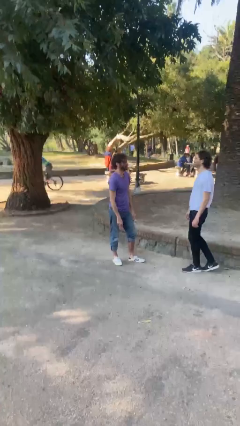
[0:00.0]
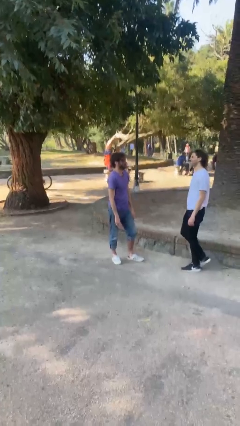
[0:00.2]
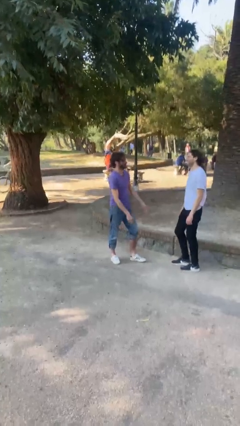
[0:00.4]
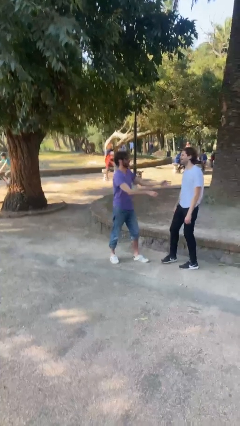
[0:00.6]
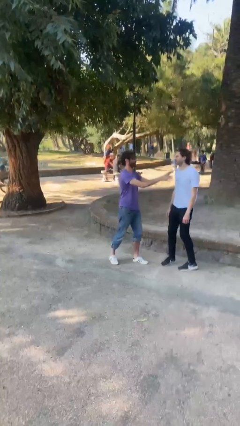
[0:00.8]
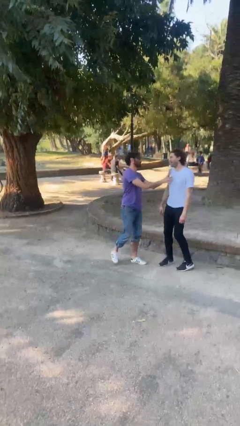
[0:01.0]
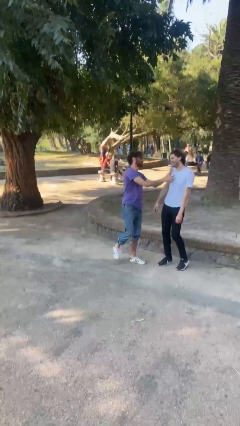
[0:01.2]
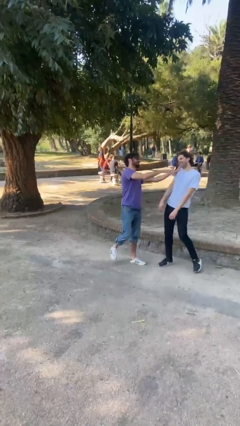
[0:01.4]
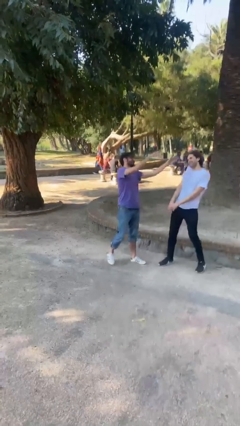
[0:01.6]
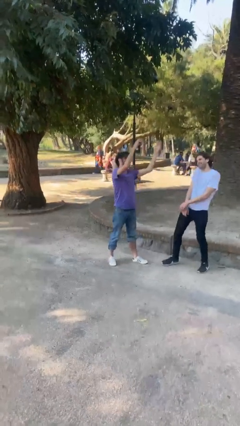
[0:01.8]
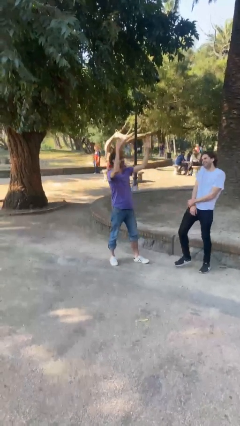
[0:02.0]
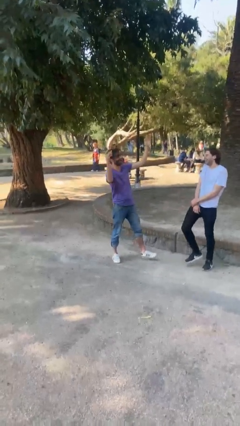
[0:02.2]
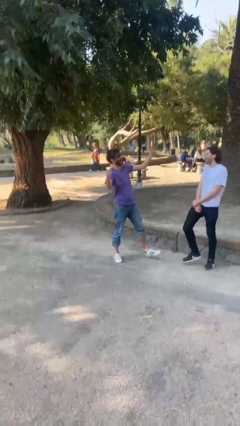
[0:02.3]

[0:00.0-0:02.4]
person shoves person

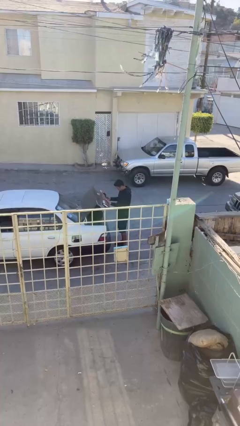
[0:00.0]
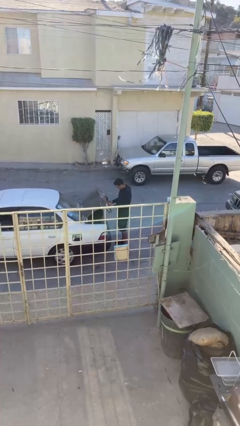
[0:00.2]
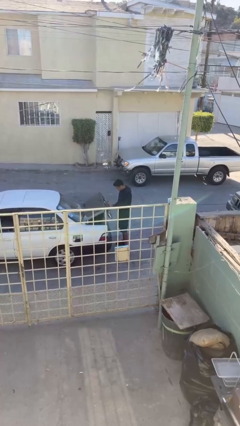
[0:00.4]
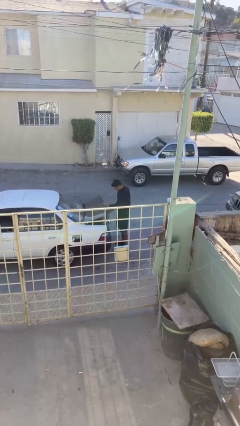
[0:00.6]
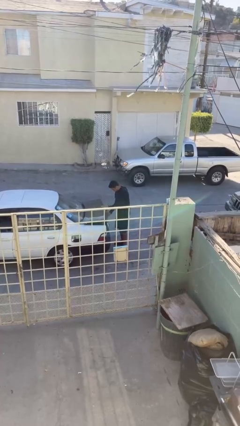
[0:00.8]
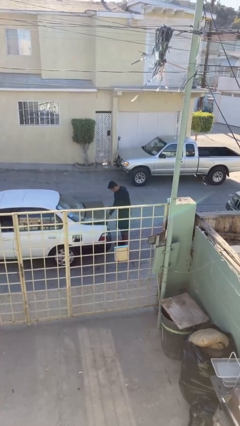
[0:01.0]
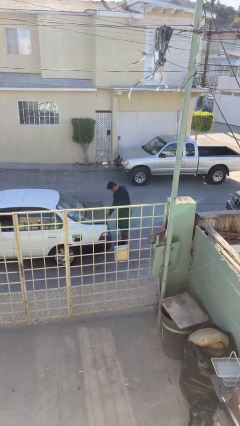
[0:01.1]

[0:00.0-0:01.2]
person closes car trunk

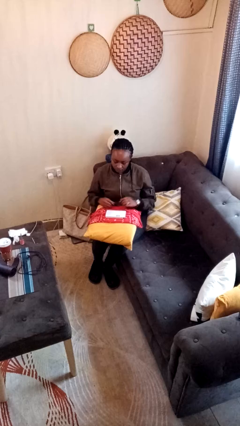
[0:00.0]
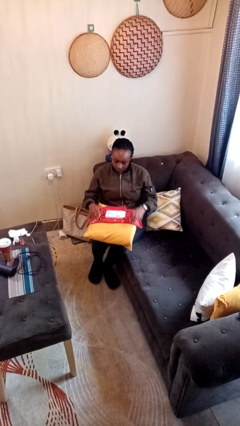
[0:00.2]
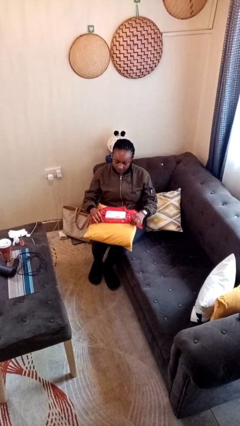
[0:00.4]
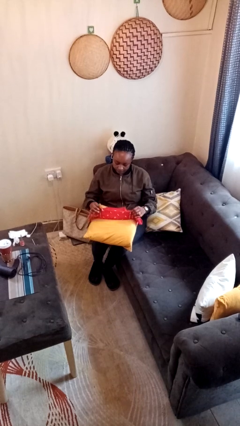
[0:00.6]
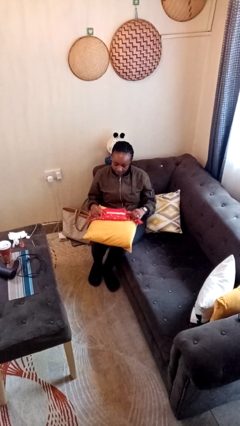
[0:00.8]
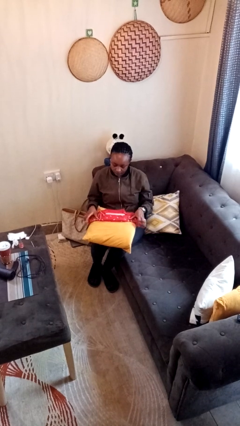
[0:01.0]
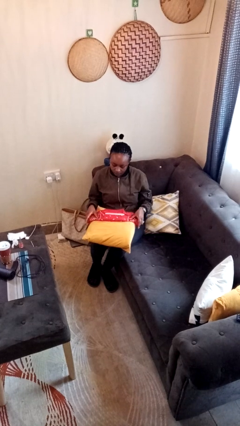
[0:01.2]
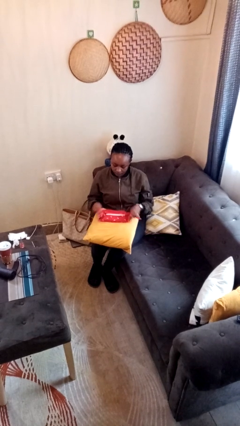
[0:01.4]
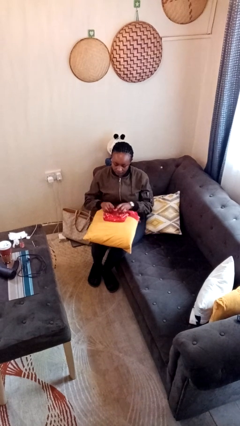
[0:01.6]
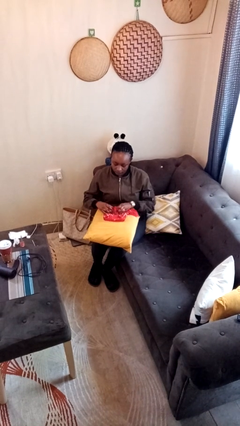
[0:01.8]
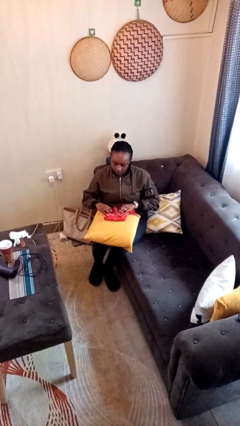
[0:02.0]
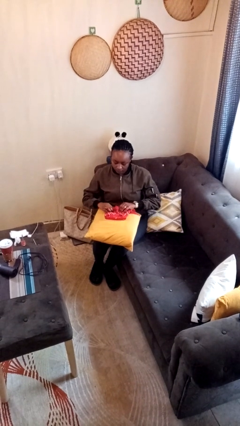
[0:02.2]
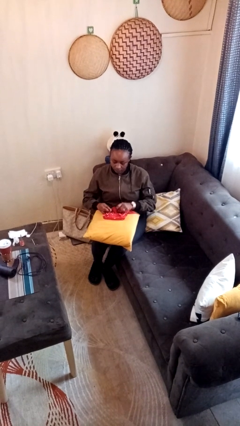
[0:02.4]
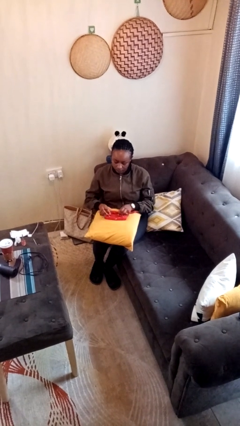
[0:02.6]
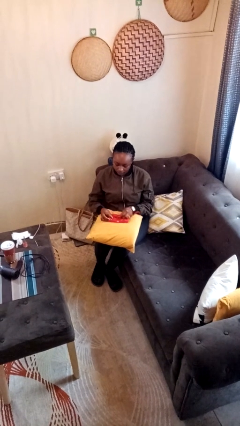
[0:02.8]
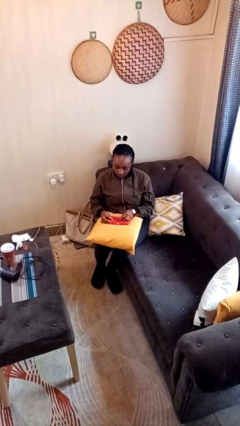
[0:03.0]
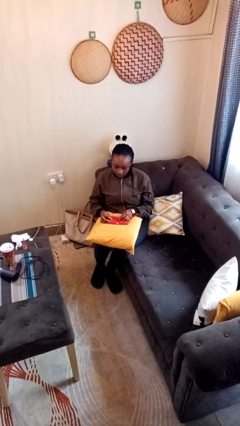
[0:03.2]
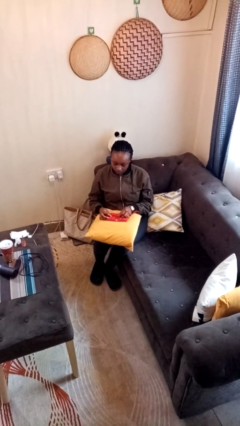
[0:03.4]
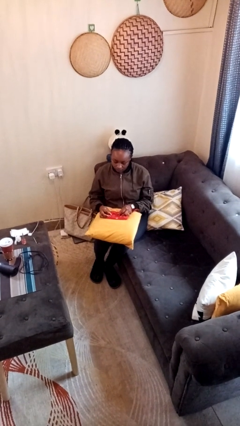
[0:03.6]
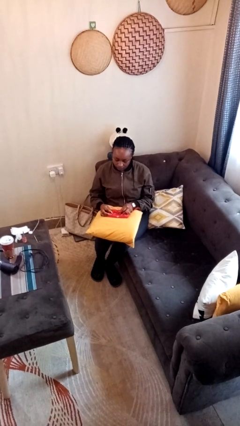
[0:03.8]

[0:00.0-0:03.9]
person wraps box

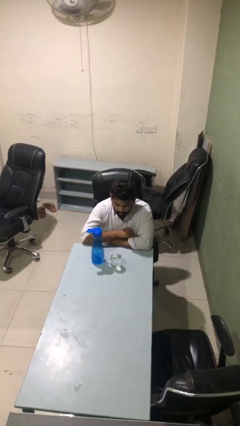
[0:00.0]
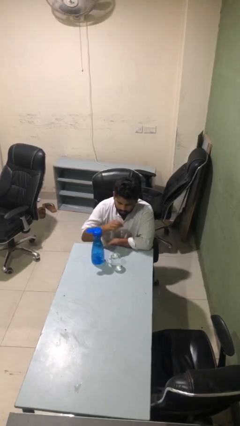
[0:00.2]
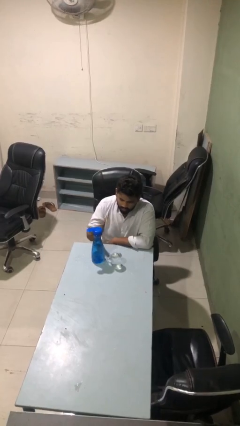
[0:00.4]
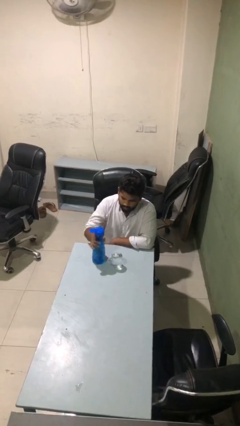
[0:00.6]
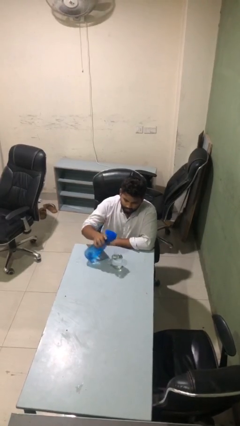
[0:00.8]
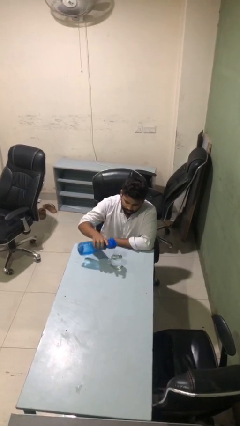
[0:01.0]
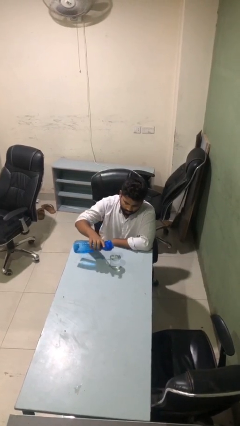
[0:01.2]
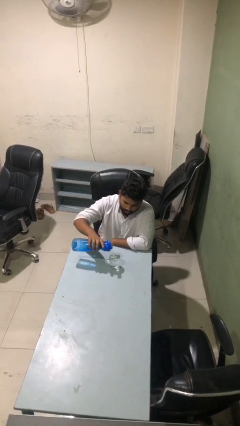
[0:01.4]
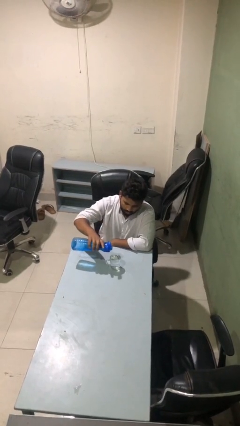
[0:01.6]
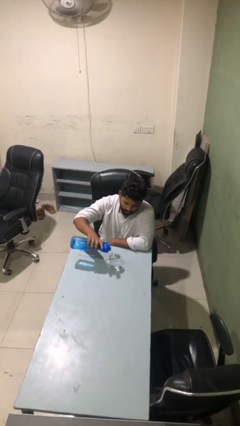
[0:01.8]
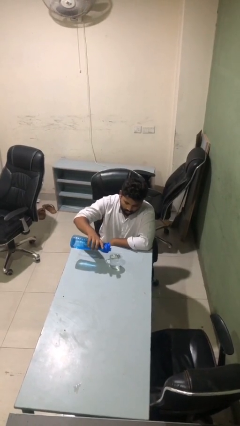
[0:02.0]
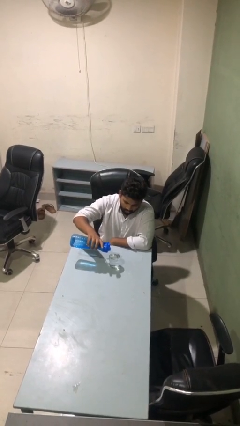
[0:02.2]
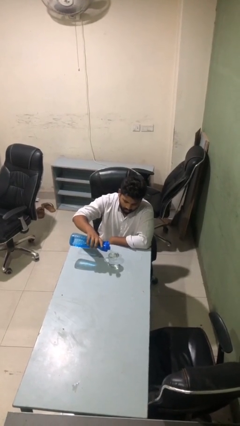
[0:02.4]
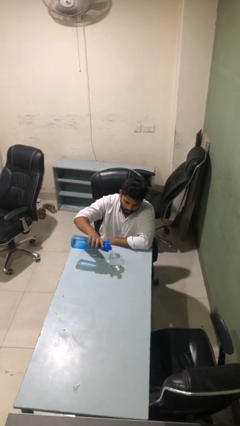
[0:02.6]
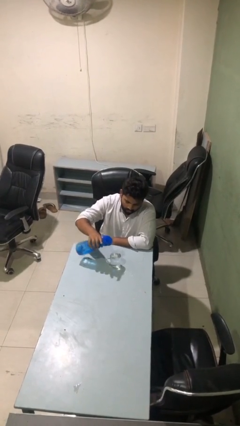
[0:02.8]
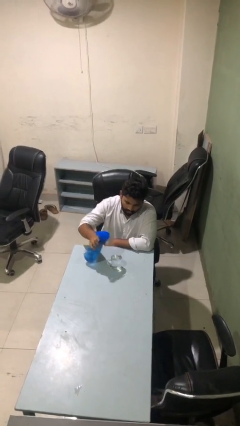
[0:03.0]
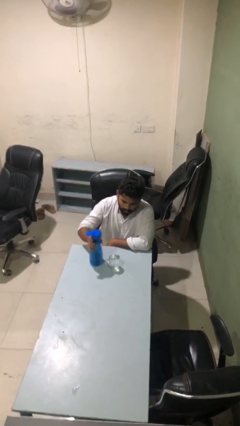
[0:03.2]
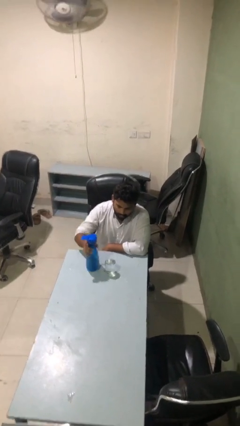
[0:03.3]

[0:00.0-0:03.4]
person pours liquid into cup

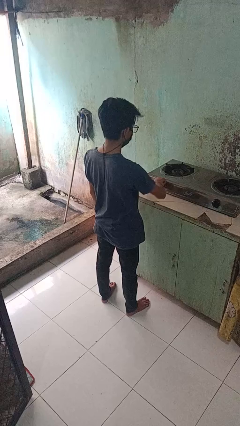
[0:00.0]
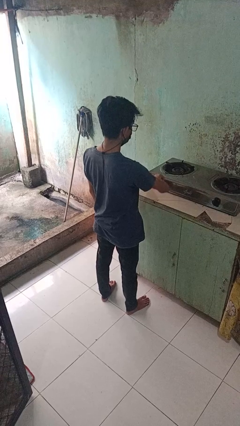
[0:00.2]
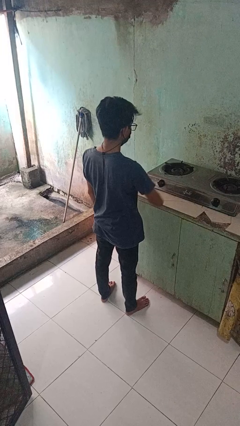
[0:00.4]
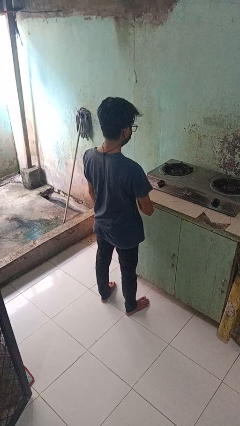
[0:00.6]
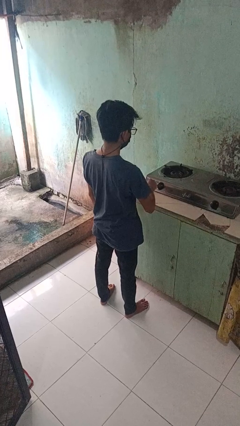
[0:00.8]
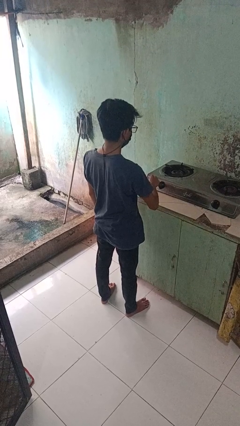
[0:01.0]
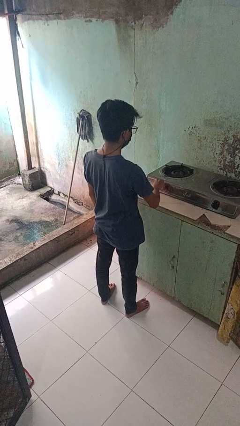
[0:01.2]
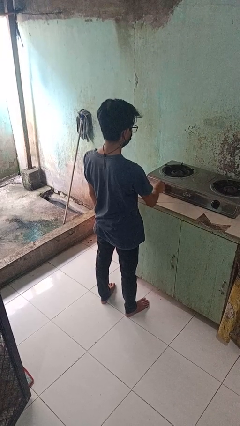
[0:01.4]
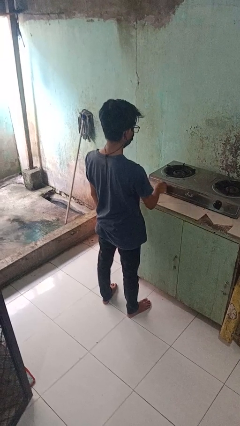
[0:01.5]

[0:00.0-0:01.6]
person turns on stovetop

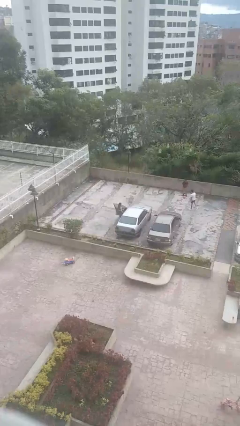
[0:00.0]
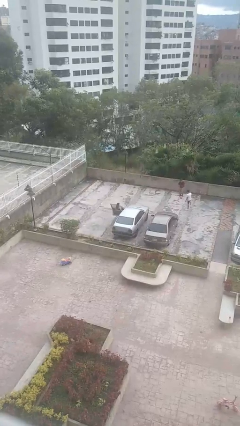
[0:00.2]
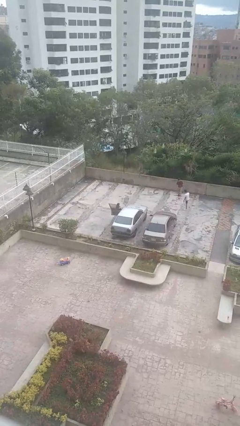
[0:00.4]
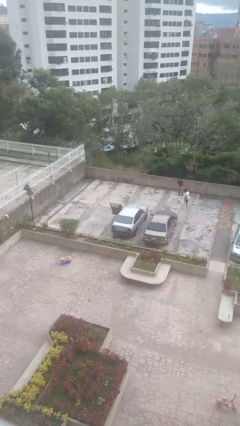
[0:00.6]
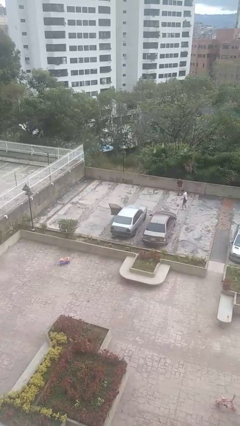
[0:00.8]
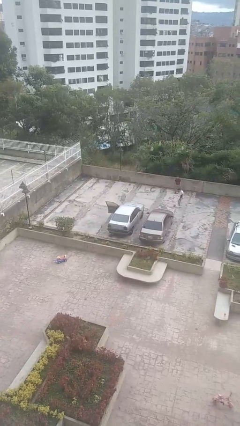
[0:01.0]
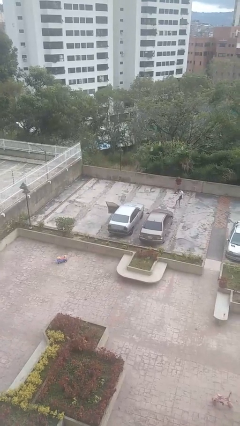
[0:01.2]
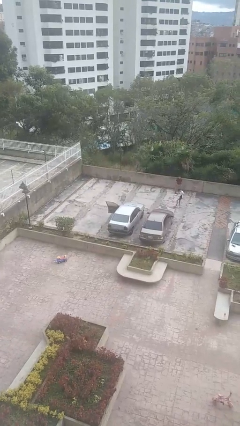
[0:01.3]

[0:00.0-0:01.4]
person enters car

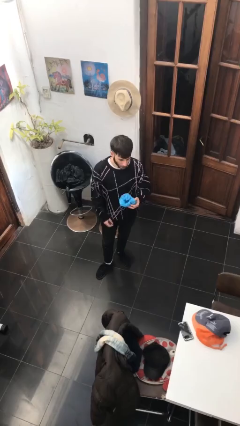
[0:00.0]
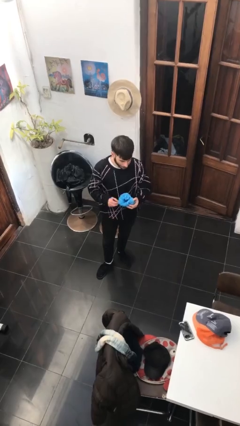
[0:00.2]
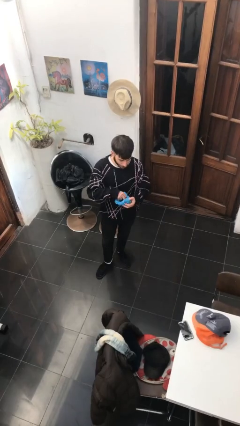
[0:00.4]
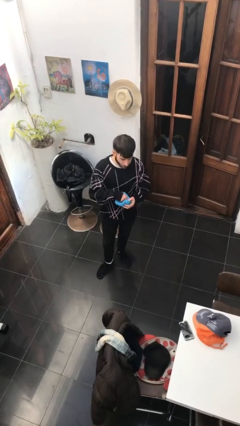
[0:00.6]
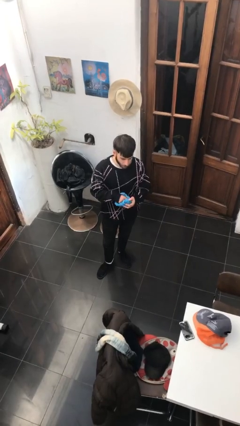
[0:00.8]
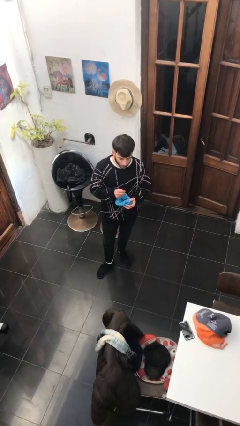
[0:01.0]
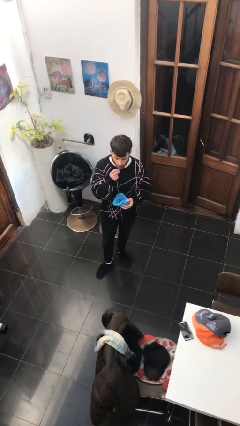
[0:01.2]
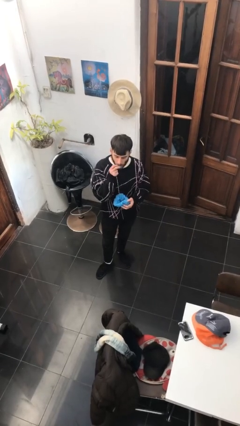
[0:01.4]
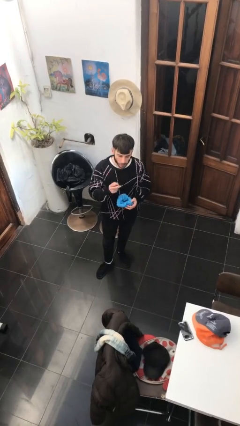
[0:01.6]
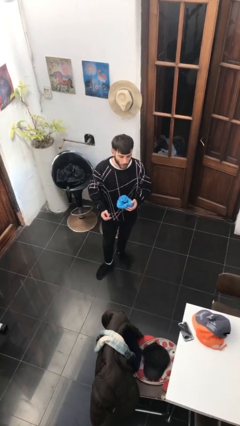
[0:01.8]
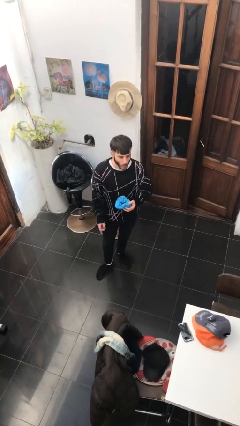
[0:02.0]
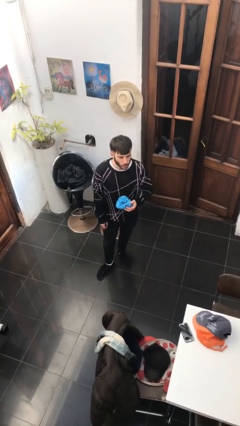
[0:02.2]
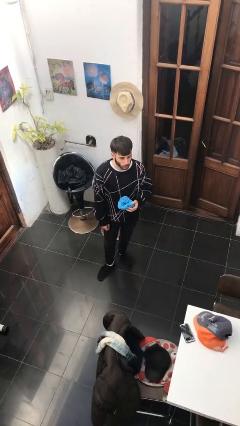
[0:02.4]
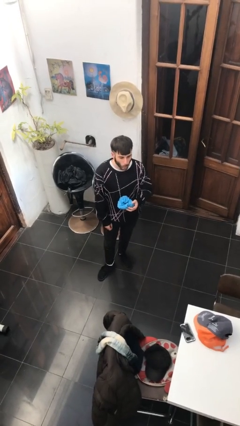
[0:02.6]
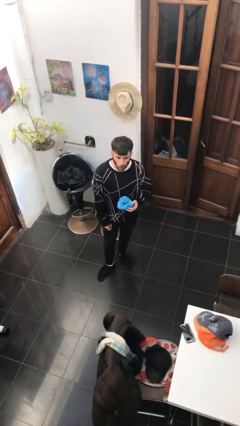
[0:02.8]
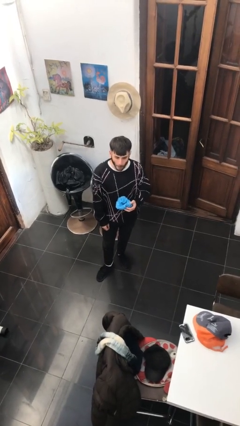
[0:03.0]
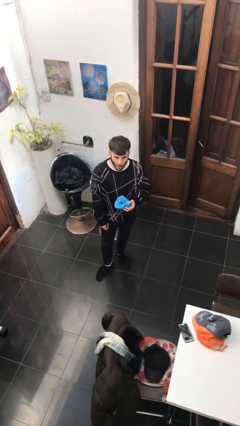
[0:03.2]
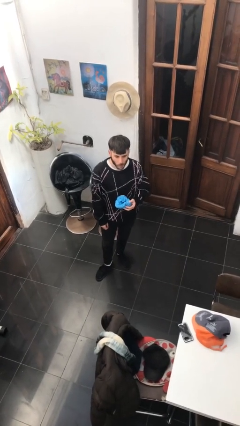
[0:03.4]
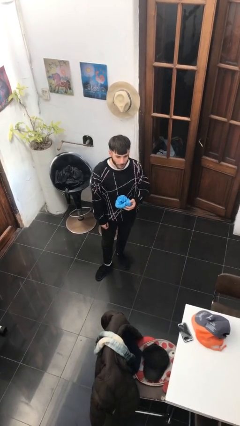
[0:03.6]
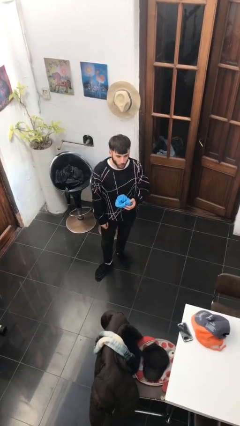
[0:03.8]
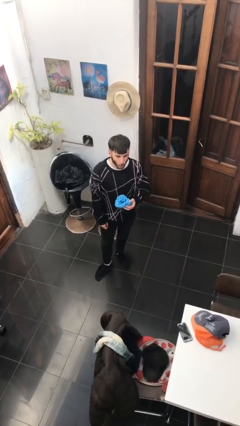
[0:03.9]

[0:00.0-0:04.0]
person eats snack from bag
